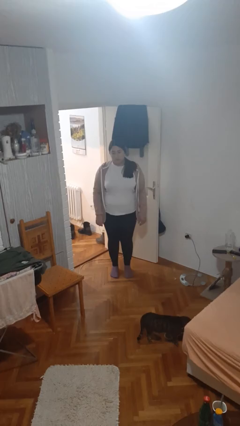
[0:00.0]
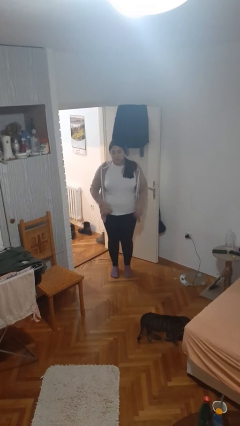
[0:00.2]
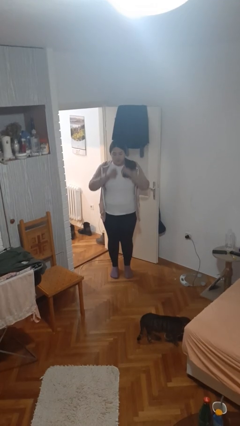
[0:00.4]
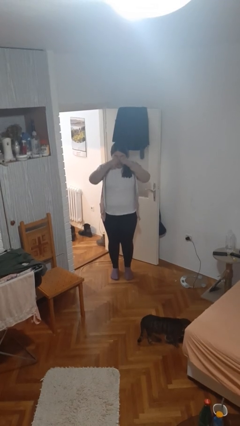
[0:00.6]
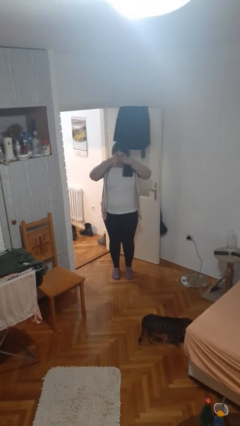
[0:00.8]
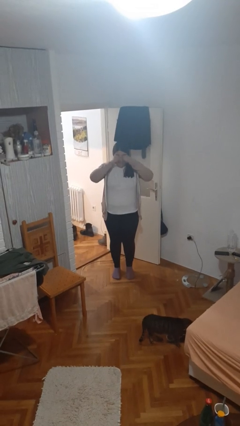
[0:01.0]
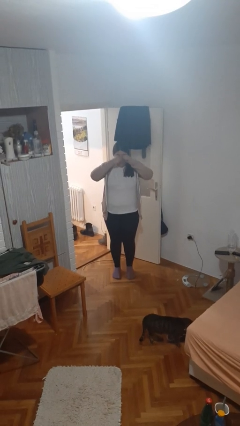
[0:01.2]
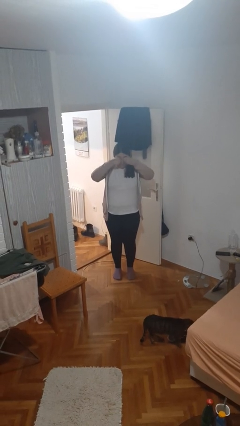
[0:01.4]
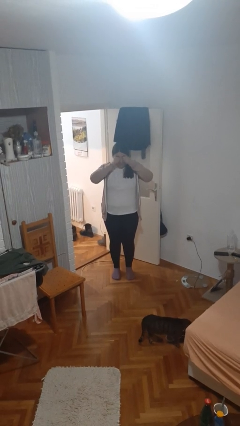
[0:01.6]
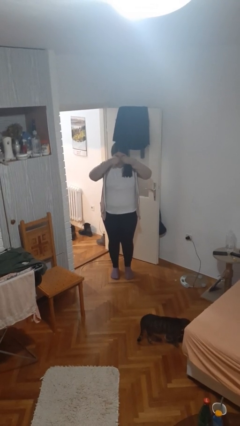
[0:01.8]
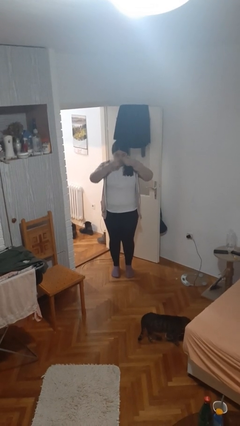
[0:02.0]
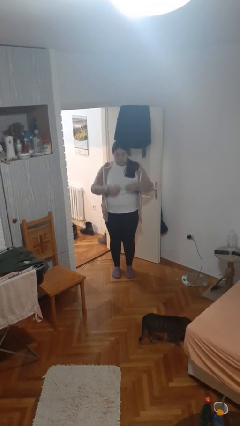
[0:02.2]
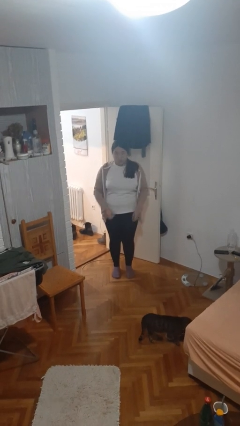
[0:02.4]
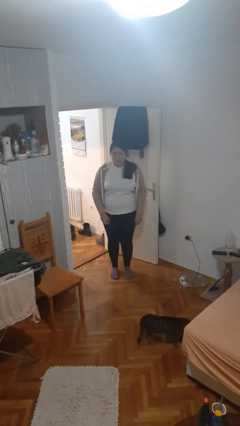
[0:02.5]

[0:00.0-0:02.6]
person rubs eyes

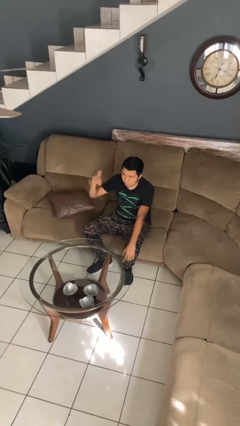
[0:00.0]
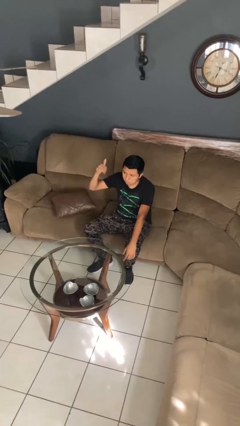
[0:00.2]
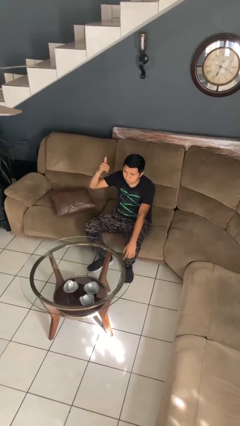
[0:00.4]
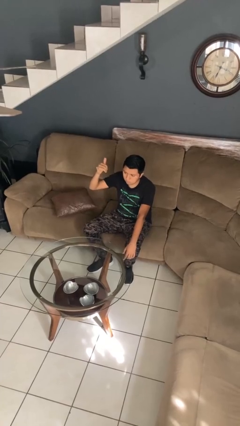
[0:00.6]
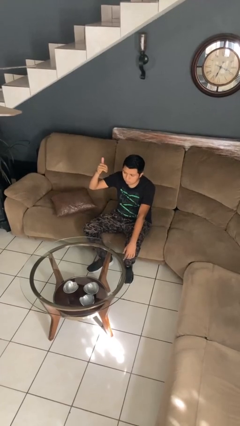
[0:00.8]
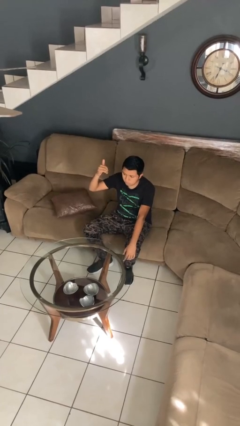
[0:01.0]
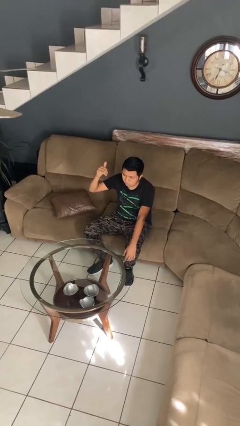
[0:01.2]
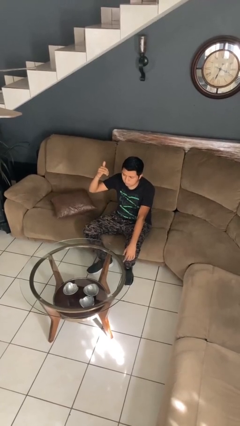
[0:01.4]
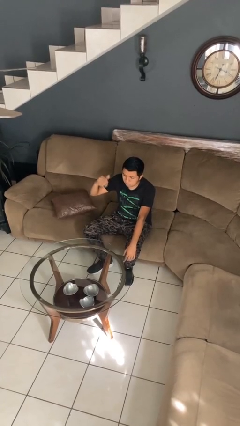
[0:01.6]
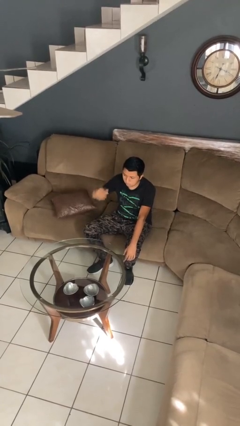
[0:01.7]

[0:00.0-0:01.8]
person gestures hang loose

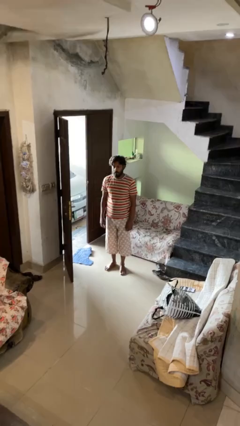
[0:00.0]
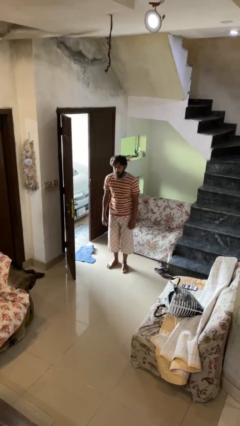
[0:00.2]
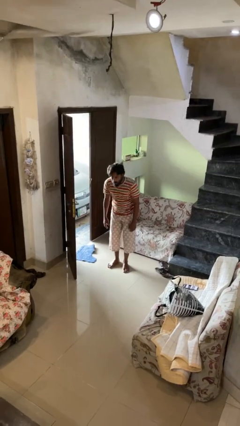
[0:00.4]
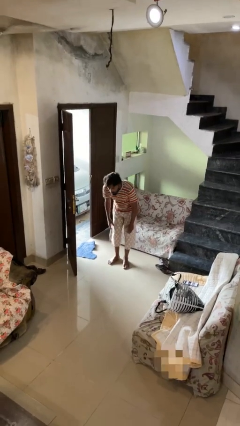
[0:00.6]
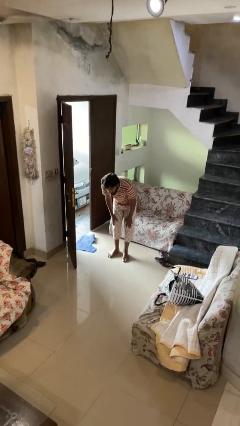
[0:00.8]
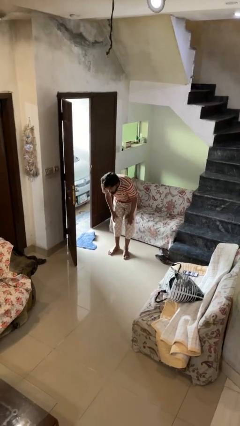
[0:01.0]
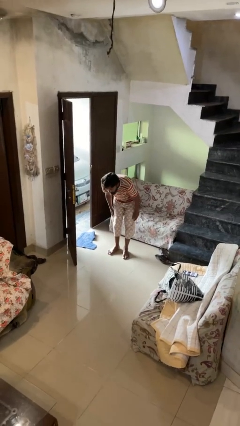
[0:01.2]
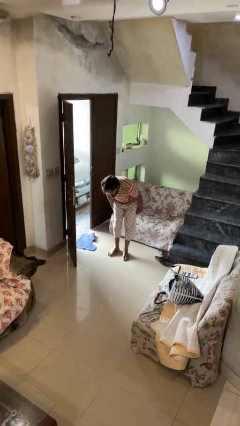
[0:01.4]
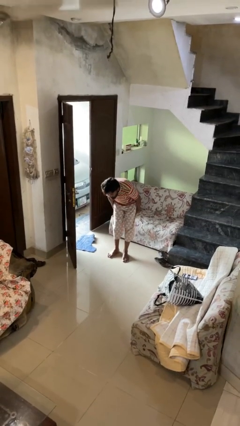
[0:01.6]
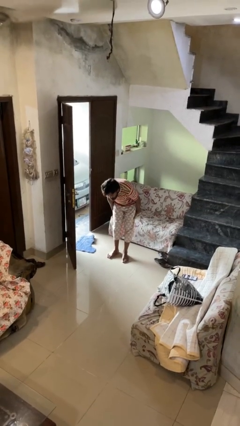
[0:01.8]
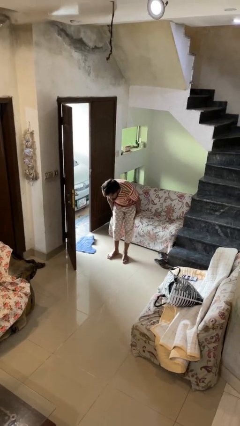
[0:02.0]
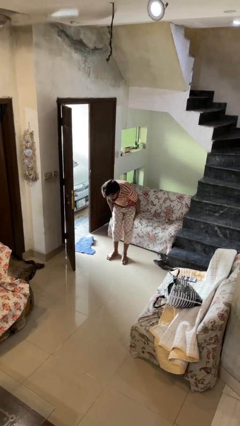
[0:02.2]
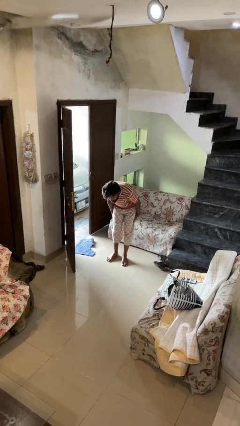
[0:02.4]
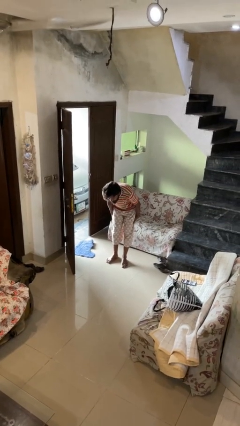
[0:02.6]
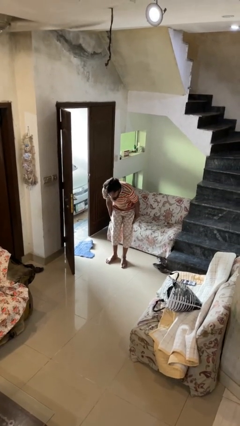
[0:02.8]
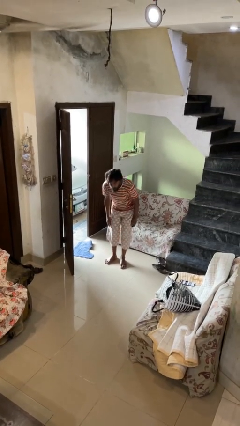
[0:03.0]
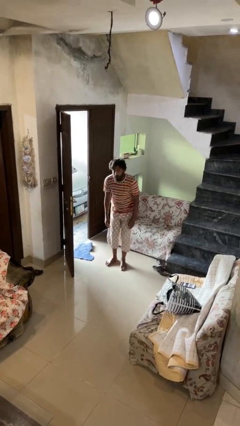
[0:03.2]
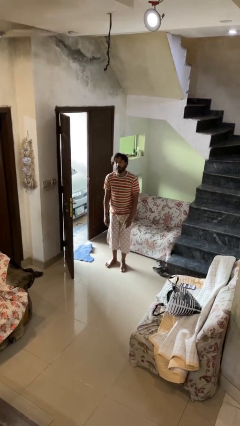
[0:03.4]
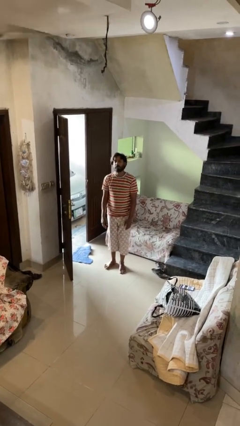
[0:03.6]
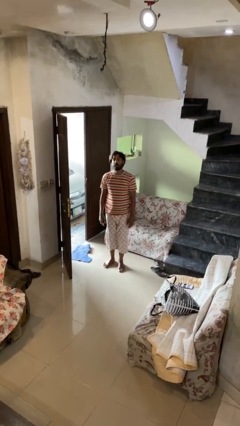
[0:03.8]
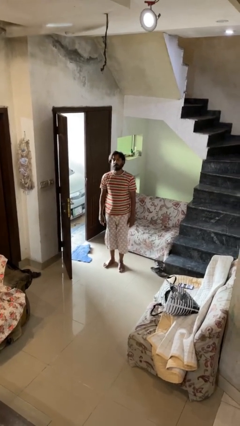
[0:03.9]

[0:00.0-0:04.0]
person bows

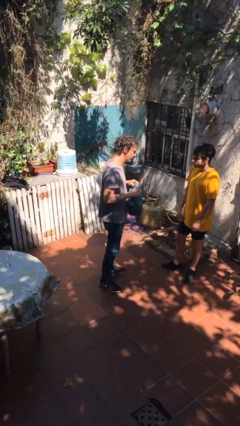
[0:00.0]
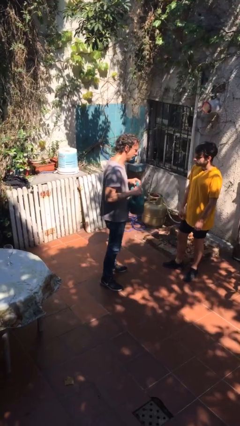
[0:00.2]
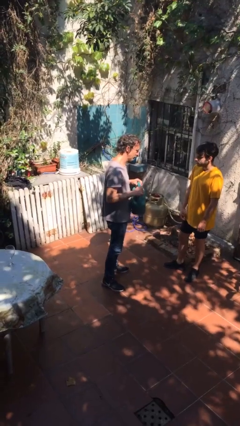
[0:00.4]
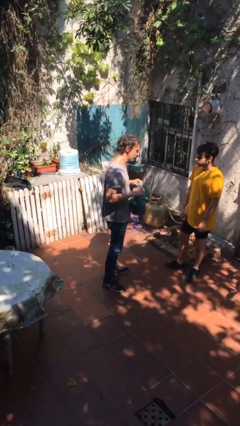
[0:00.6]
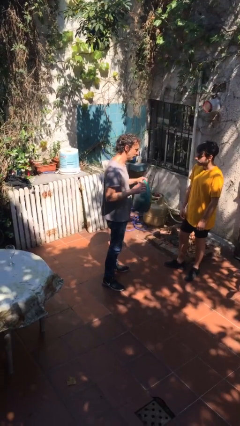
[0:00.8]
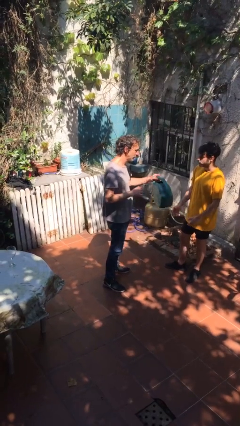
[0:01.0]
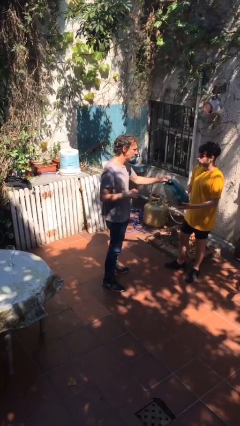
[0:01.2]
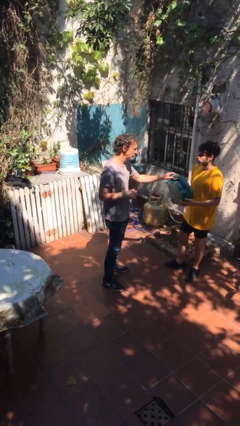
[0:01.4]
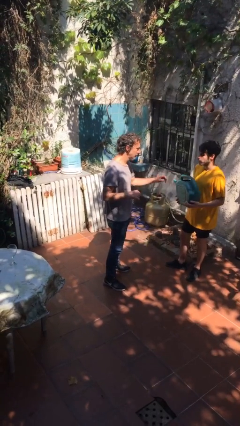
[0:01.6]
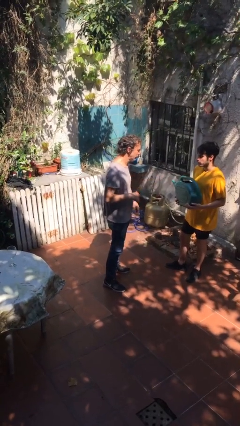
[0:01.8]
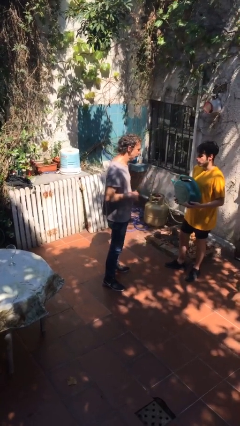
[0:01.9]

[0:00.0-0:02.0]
person transfers object to person

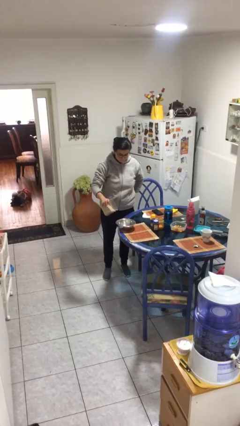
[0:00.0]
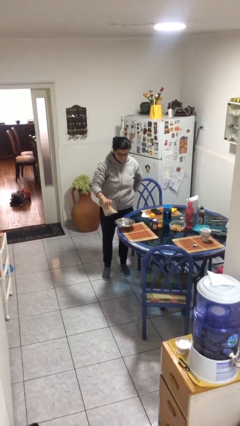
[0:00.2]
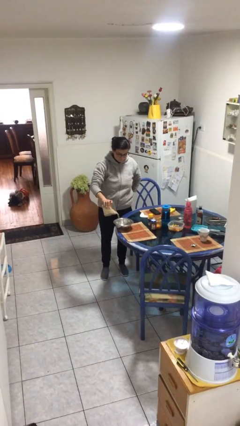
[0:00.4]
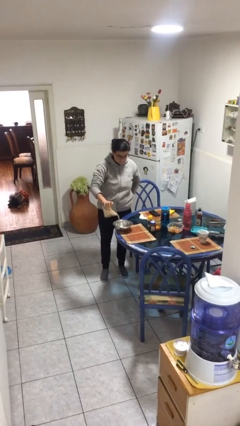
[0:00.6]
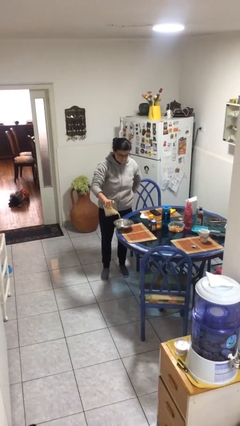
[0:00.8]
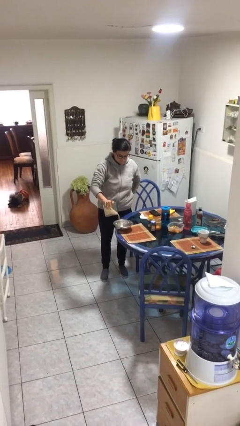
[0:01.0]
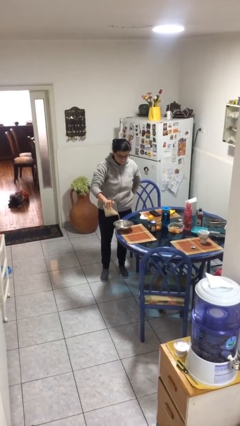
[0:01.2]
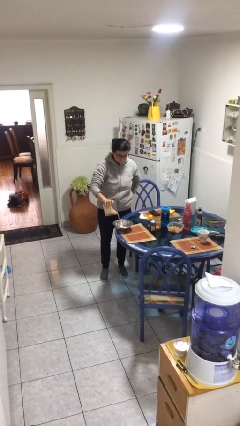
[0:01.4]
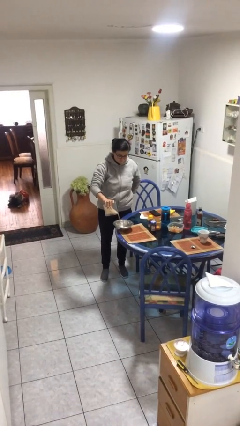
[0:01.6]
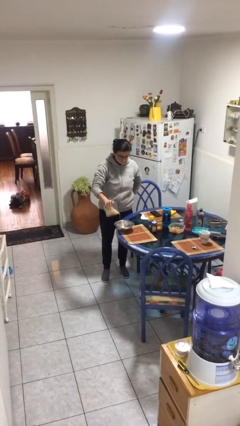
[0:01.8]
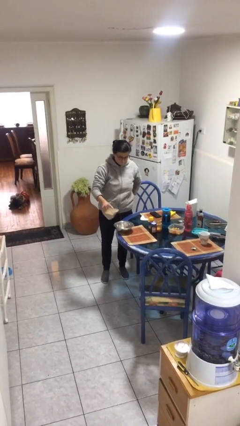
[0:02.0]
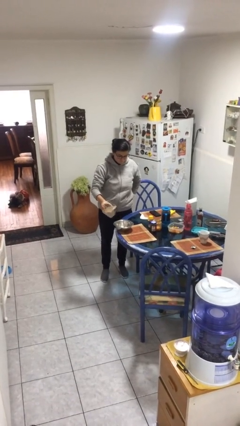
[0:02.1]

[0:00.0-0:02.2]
person pours into bowl

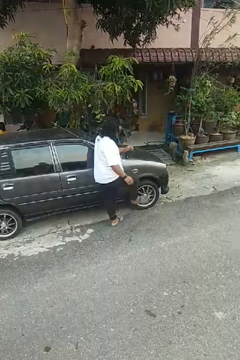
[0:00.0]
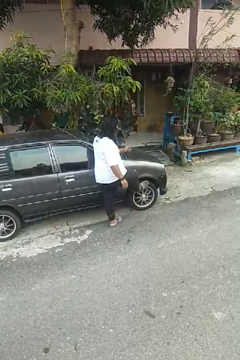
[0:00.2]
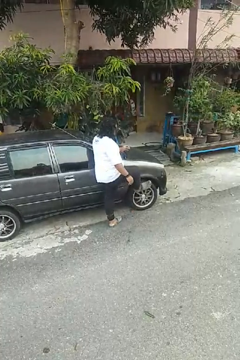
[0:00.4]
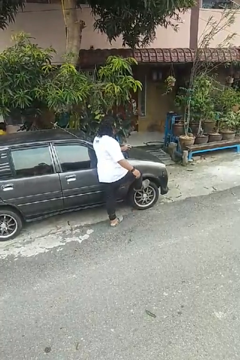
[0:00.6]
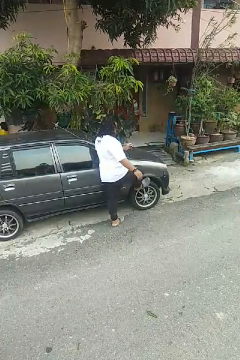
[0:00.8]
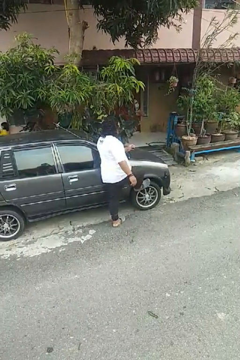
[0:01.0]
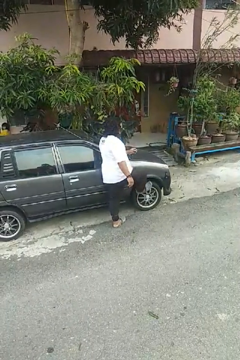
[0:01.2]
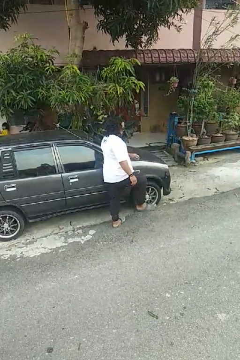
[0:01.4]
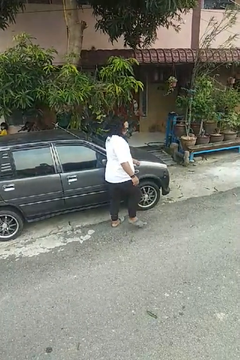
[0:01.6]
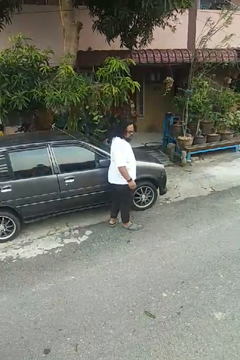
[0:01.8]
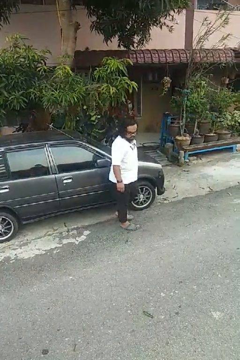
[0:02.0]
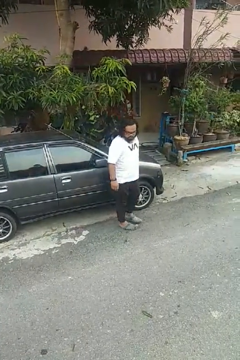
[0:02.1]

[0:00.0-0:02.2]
person kicks car tires

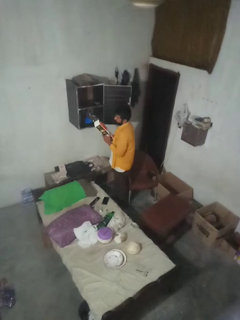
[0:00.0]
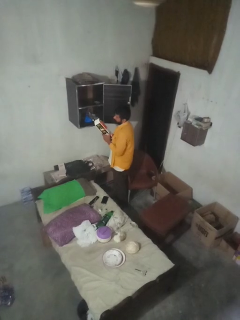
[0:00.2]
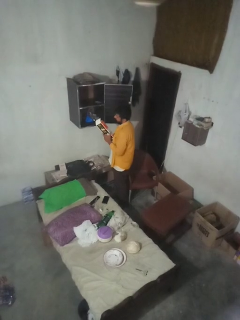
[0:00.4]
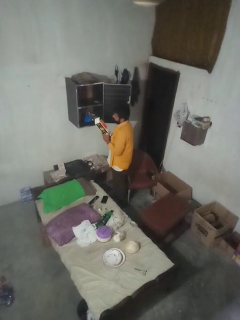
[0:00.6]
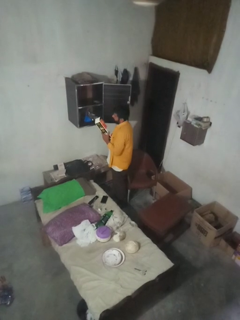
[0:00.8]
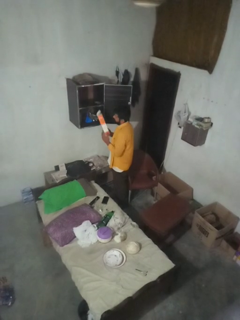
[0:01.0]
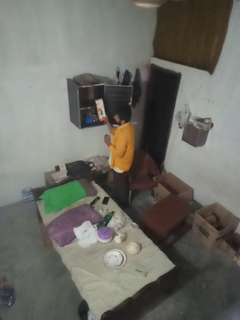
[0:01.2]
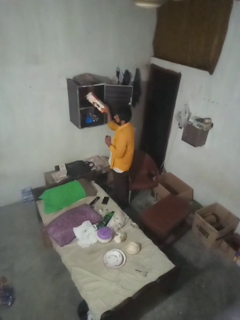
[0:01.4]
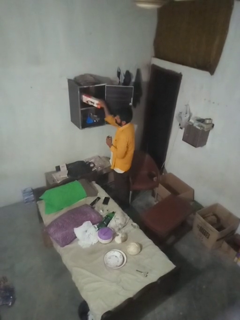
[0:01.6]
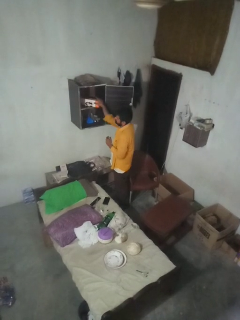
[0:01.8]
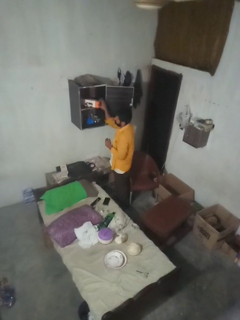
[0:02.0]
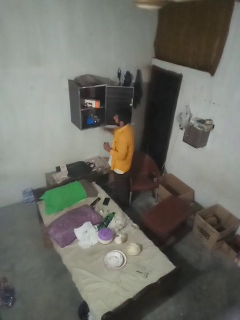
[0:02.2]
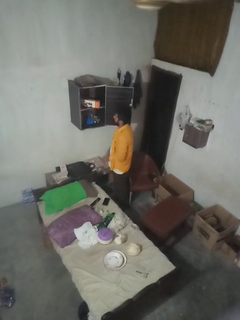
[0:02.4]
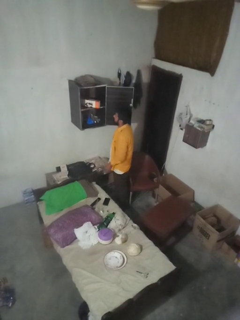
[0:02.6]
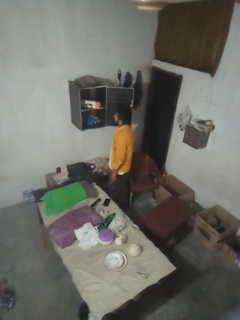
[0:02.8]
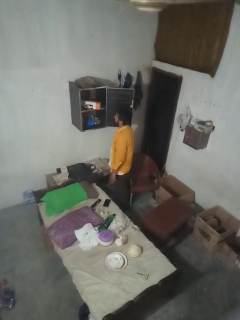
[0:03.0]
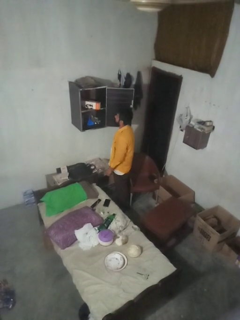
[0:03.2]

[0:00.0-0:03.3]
person puts down object into cabinet

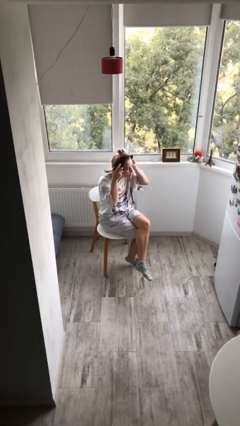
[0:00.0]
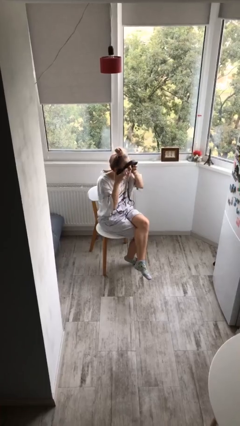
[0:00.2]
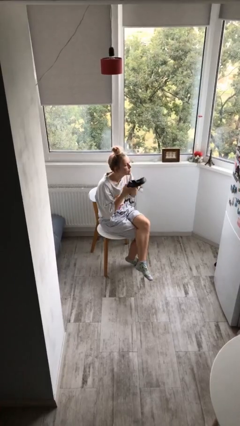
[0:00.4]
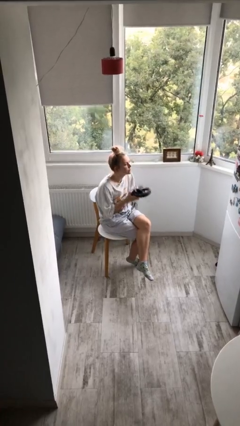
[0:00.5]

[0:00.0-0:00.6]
person takes off headphones
